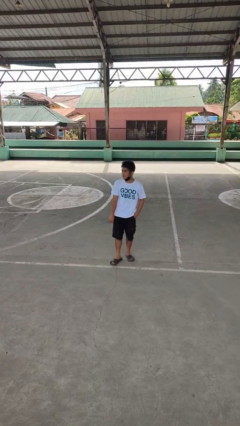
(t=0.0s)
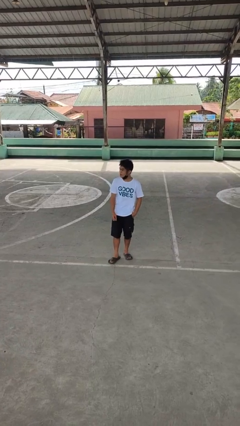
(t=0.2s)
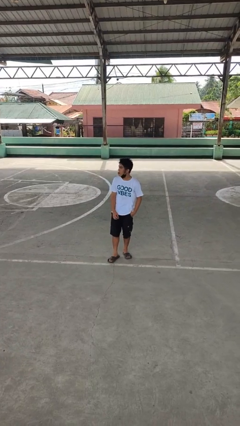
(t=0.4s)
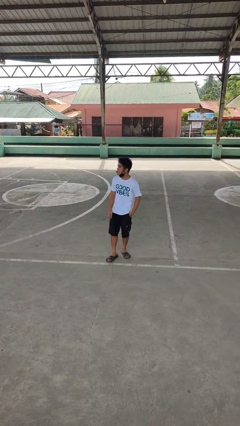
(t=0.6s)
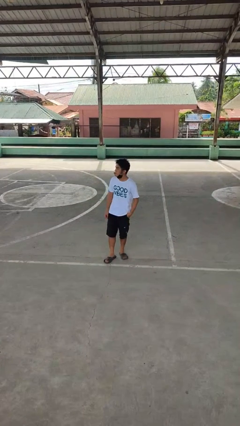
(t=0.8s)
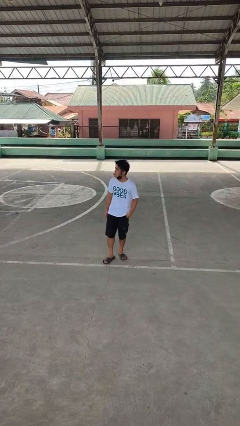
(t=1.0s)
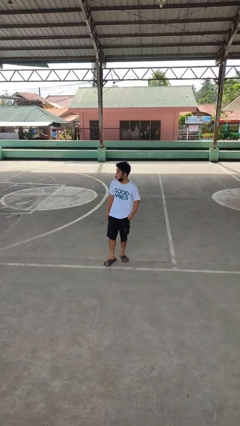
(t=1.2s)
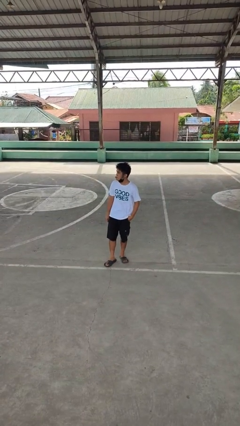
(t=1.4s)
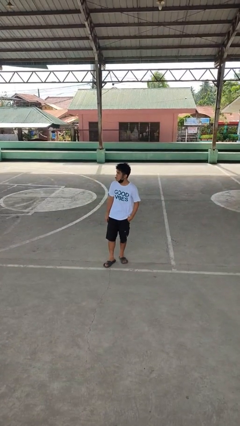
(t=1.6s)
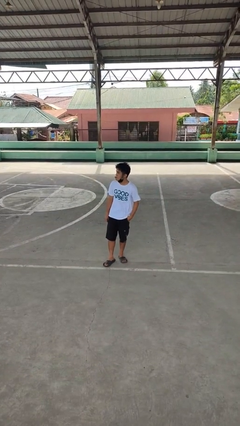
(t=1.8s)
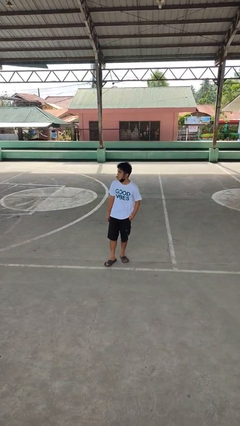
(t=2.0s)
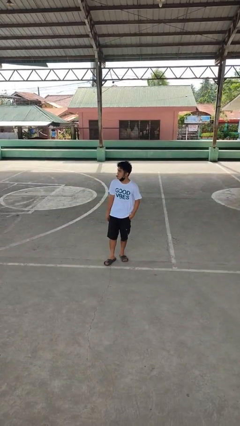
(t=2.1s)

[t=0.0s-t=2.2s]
person sticks out tongue

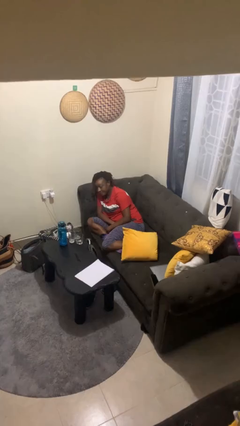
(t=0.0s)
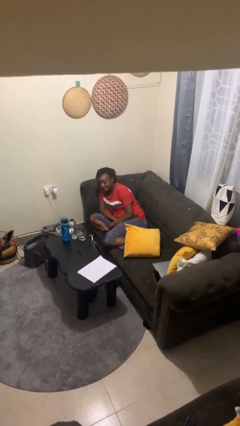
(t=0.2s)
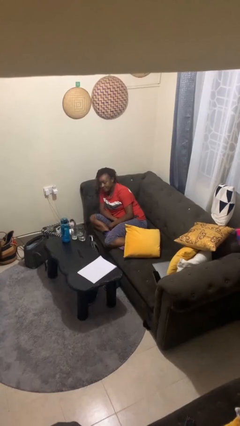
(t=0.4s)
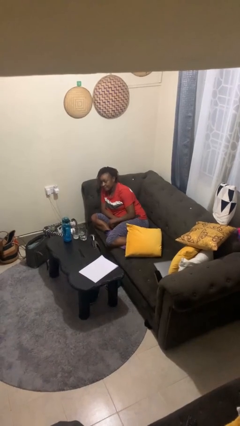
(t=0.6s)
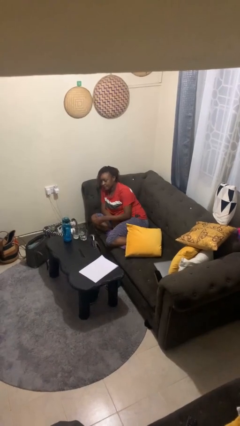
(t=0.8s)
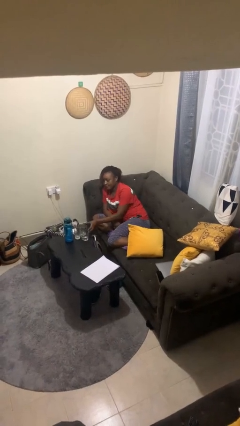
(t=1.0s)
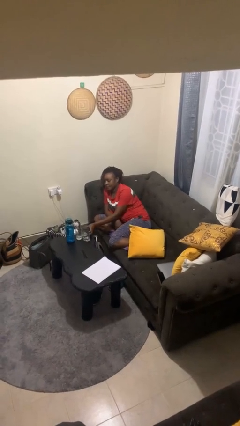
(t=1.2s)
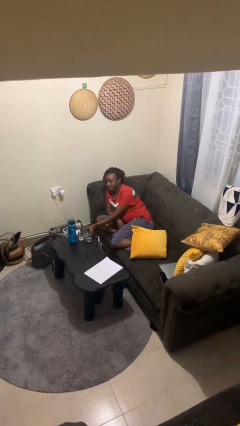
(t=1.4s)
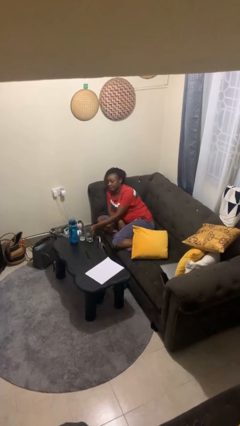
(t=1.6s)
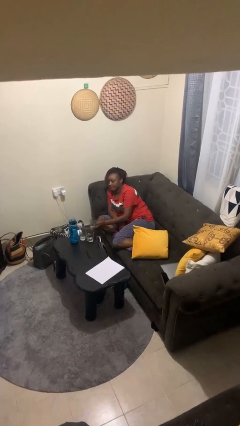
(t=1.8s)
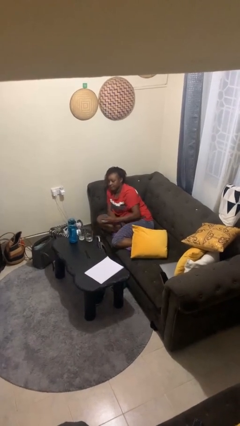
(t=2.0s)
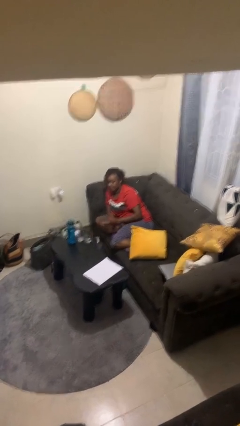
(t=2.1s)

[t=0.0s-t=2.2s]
person picks up object from table

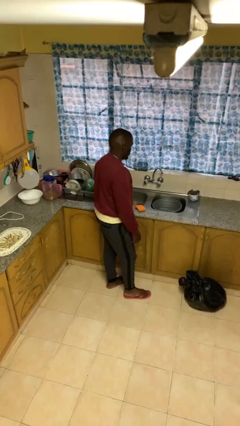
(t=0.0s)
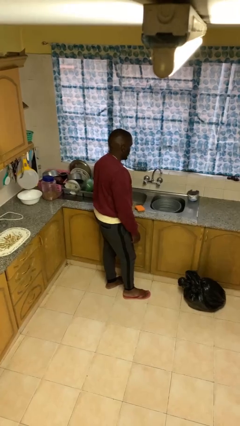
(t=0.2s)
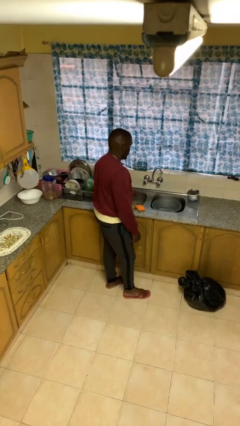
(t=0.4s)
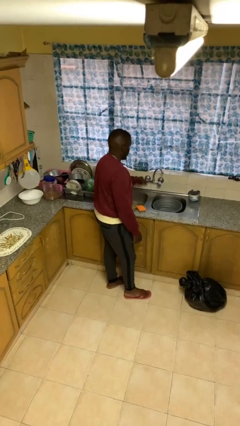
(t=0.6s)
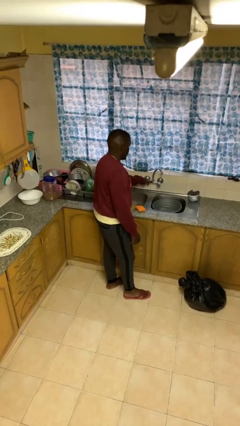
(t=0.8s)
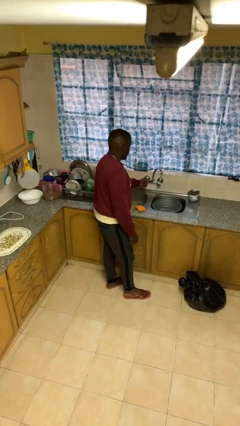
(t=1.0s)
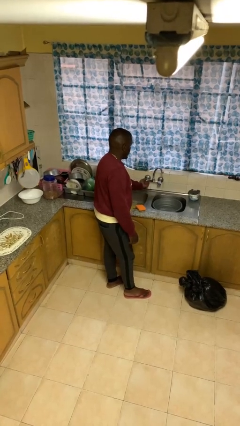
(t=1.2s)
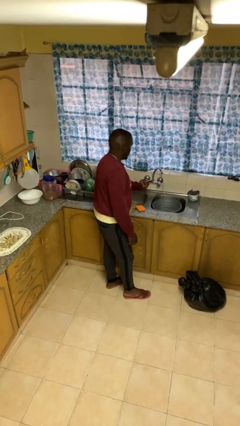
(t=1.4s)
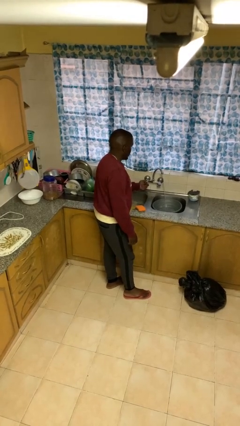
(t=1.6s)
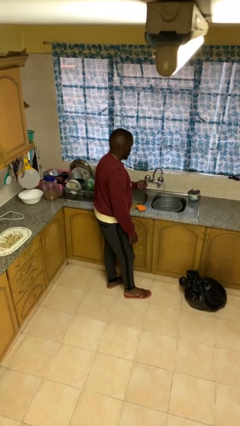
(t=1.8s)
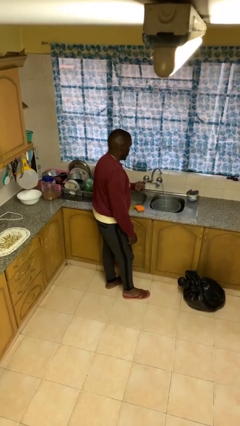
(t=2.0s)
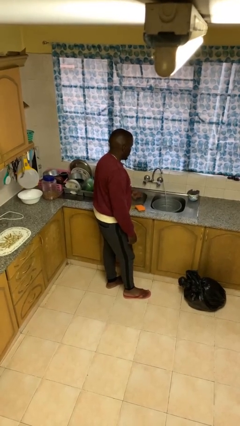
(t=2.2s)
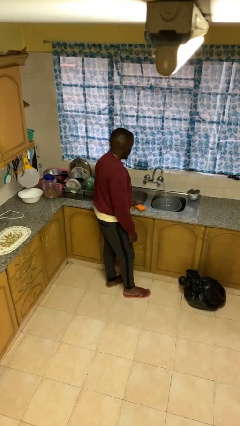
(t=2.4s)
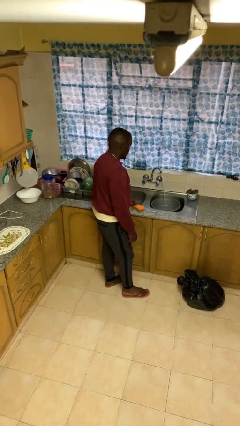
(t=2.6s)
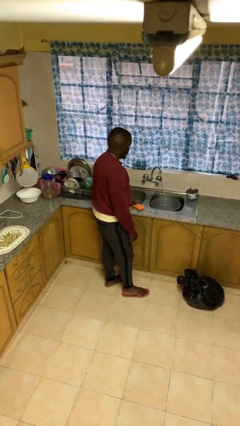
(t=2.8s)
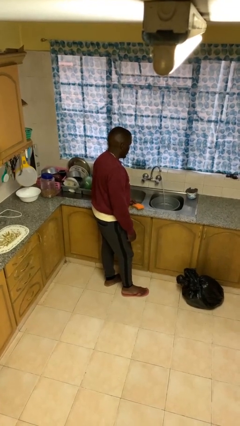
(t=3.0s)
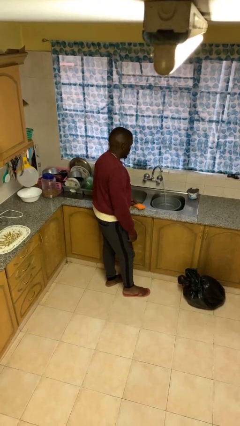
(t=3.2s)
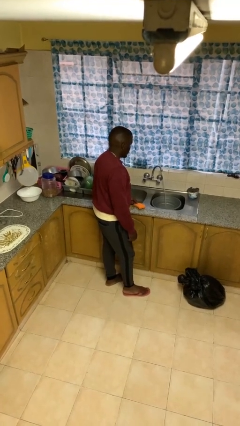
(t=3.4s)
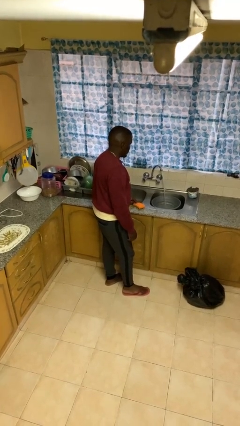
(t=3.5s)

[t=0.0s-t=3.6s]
person turns on faucet

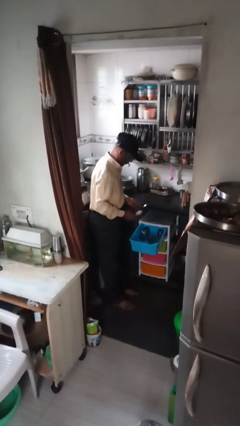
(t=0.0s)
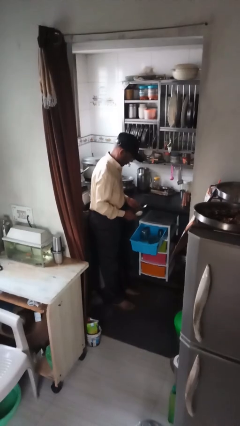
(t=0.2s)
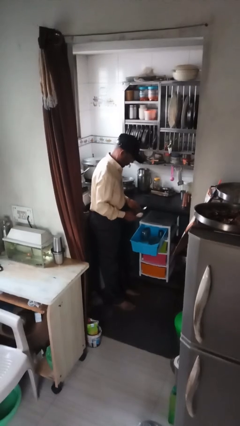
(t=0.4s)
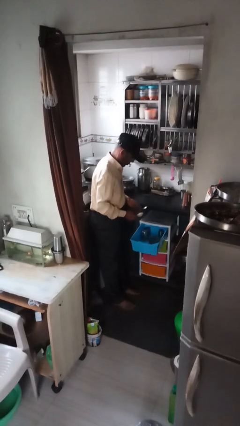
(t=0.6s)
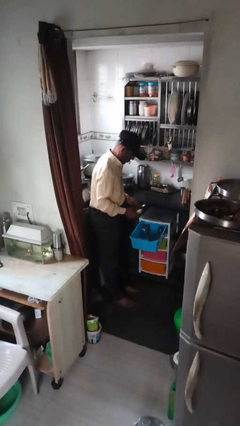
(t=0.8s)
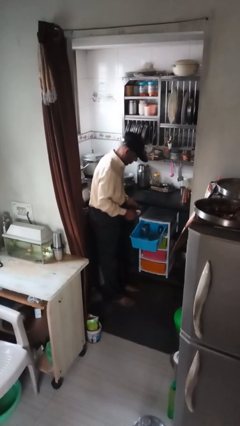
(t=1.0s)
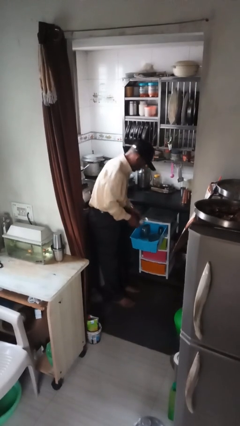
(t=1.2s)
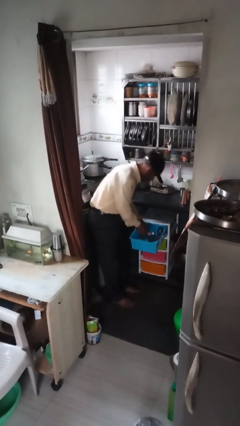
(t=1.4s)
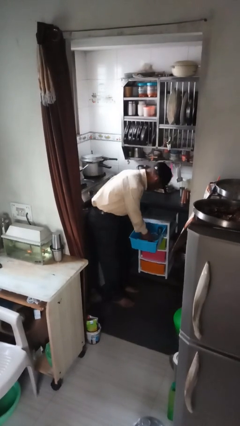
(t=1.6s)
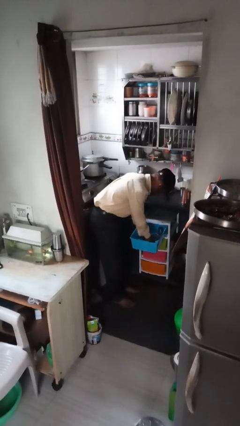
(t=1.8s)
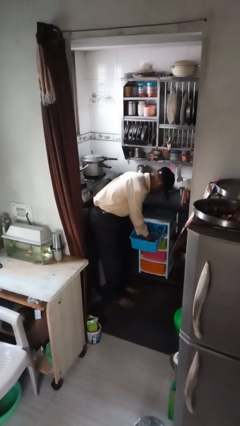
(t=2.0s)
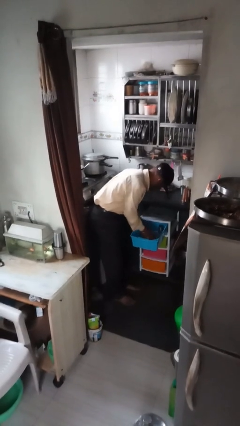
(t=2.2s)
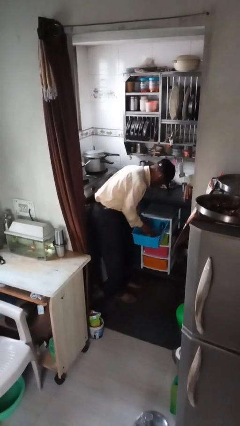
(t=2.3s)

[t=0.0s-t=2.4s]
person puts object into kitchen drawer

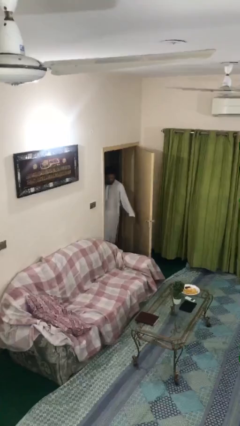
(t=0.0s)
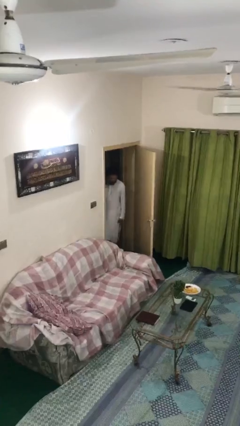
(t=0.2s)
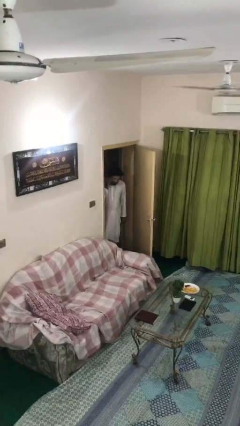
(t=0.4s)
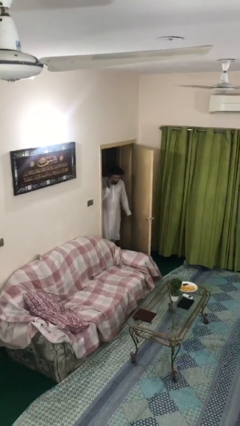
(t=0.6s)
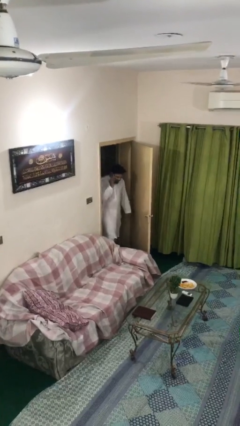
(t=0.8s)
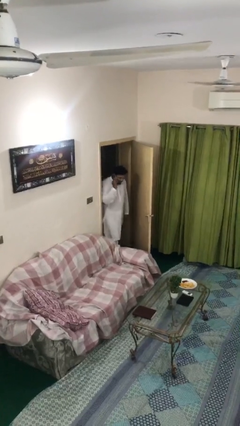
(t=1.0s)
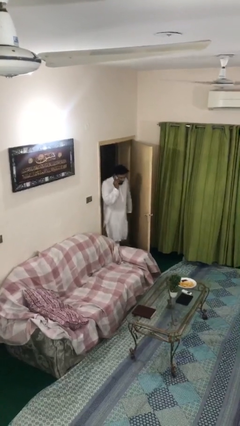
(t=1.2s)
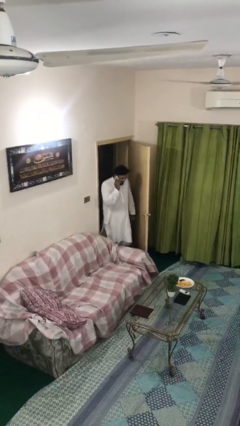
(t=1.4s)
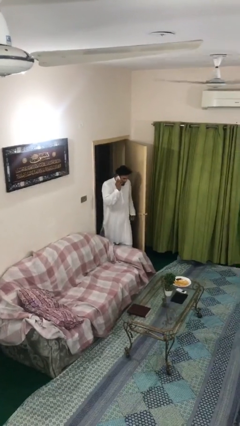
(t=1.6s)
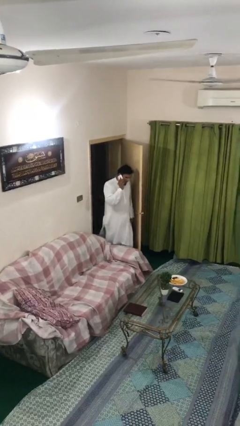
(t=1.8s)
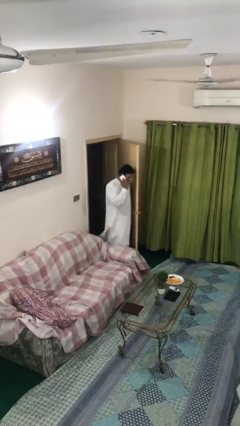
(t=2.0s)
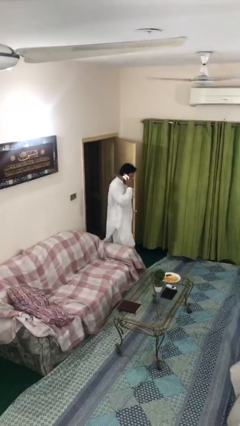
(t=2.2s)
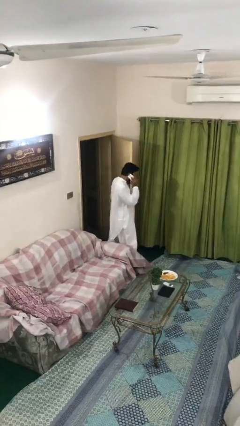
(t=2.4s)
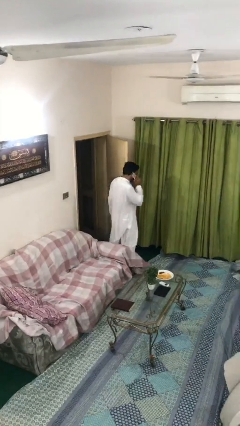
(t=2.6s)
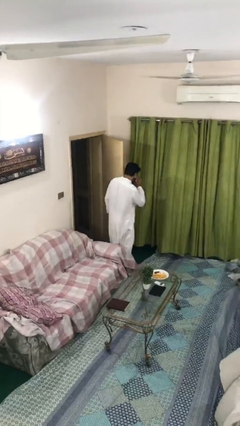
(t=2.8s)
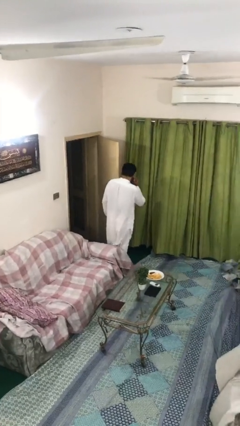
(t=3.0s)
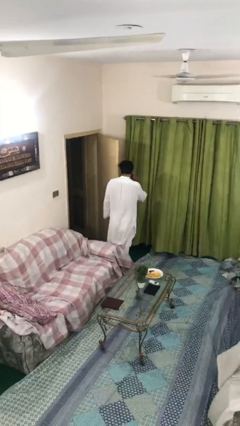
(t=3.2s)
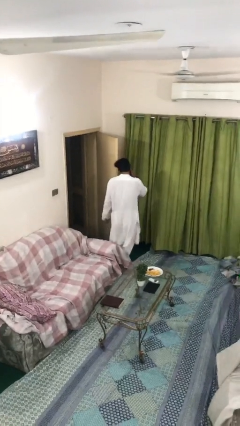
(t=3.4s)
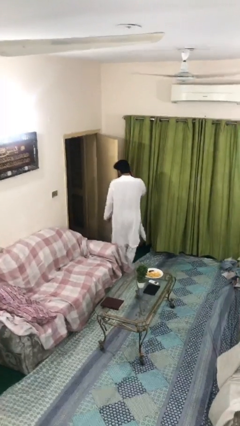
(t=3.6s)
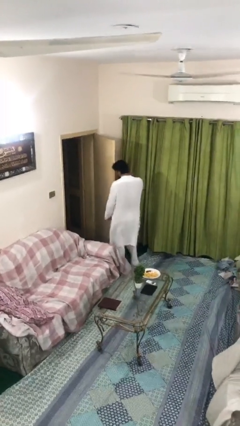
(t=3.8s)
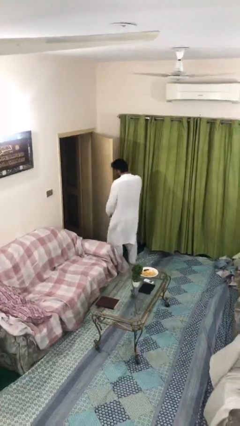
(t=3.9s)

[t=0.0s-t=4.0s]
person enters scene through structure

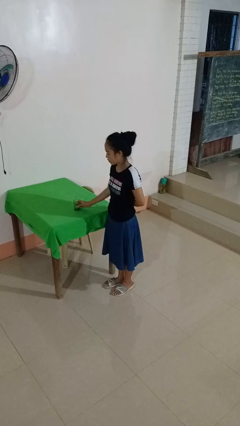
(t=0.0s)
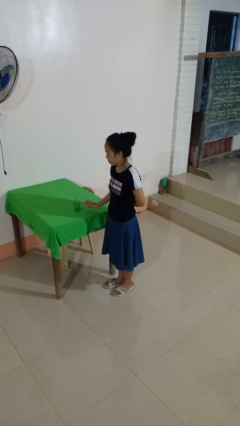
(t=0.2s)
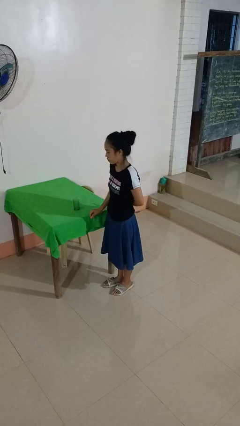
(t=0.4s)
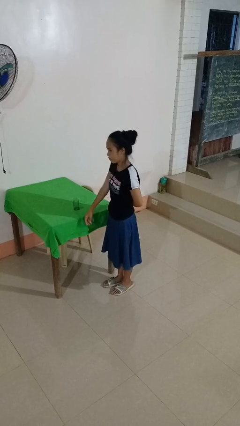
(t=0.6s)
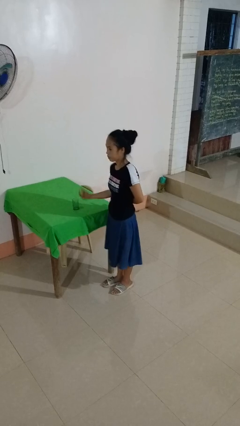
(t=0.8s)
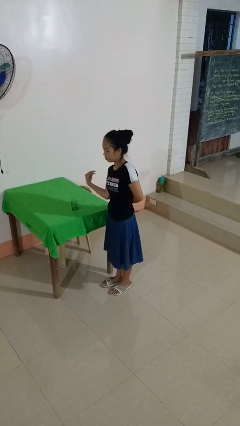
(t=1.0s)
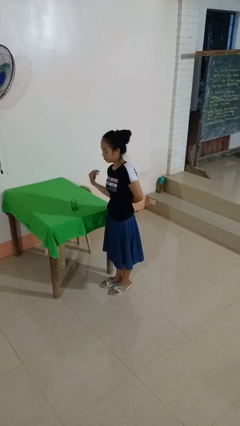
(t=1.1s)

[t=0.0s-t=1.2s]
person sets upright glass

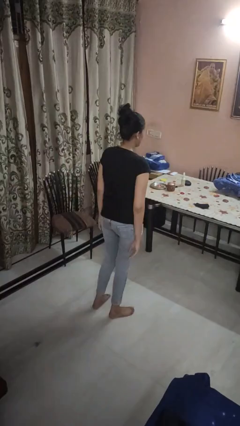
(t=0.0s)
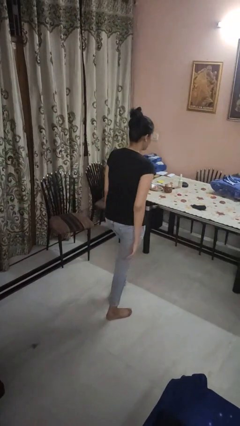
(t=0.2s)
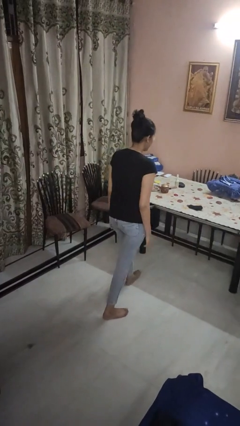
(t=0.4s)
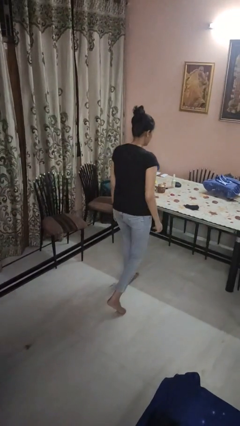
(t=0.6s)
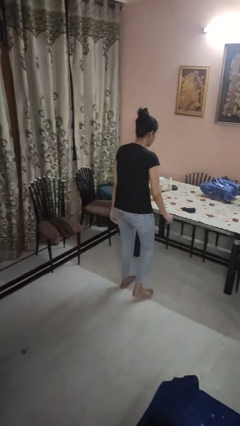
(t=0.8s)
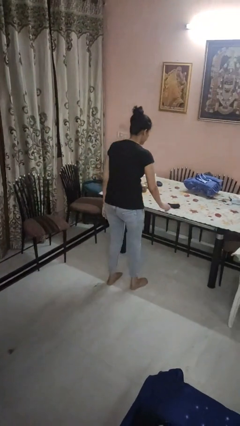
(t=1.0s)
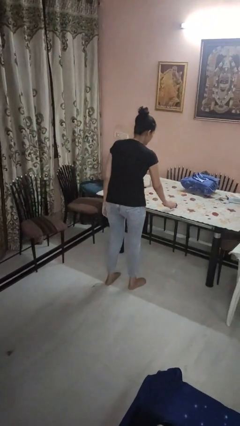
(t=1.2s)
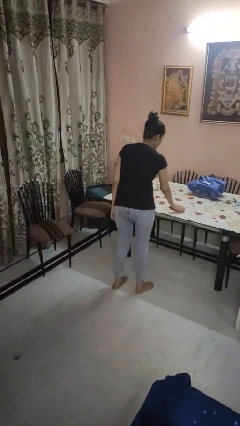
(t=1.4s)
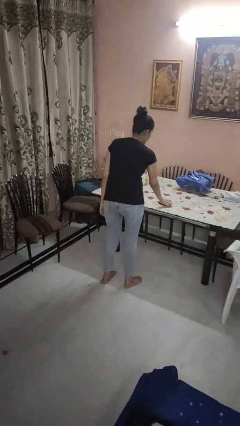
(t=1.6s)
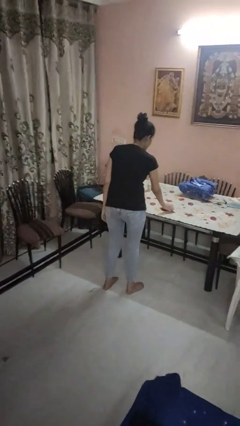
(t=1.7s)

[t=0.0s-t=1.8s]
person throws object on table
